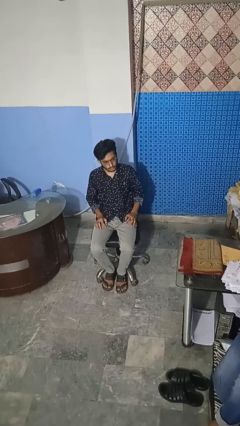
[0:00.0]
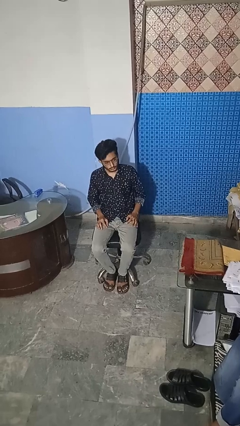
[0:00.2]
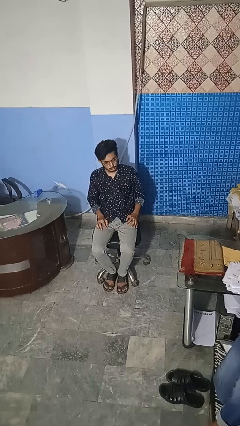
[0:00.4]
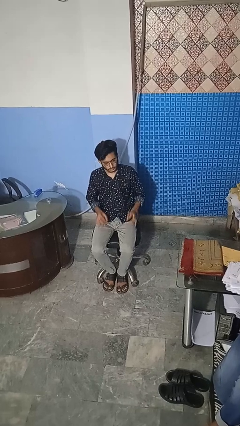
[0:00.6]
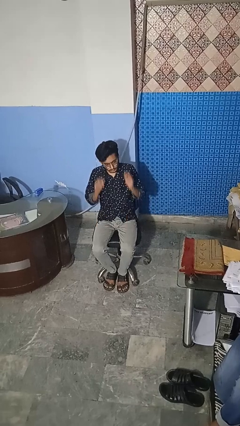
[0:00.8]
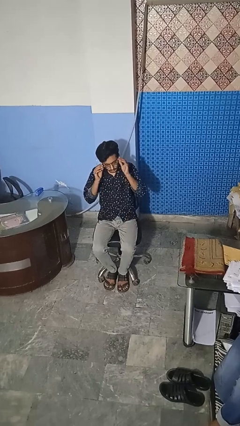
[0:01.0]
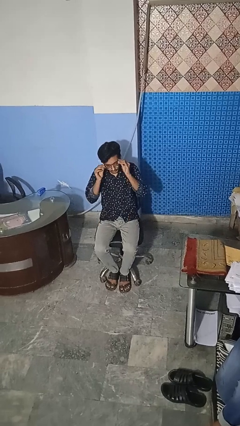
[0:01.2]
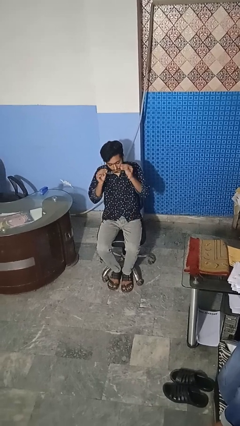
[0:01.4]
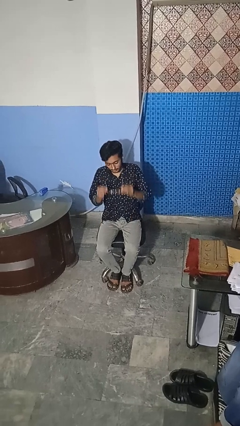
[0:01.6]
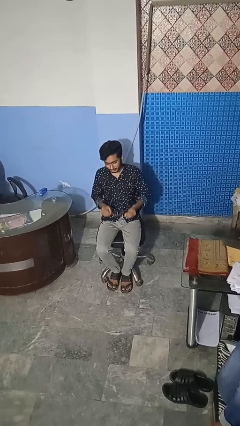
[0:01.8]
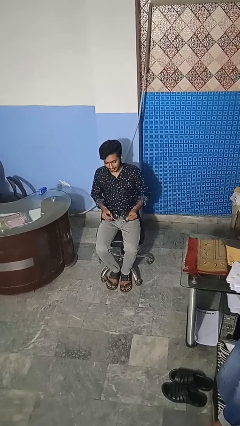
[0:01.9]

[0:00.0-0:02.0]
person takes off glasses

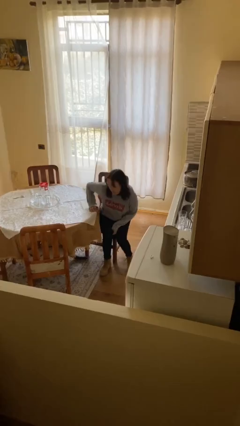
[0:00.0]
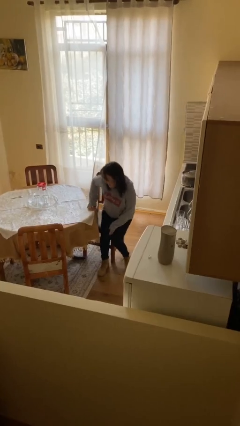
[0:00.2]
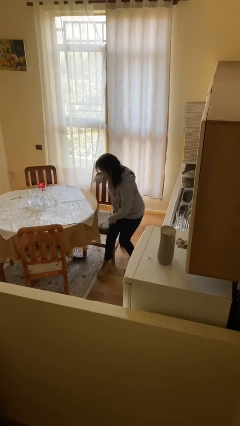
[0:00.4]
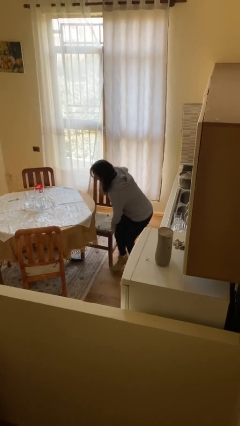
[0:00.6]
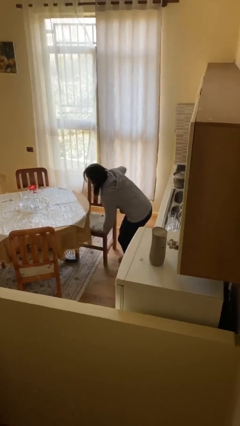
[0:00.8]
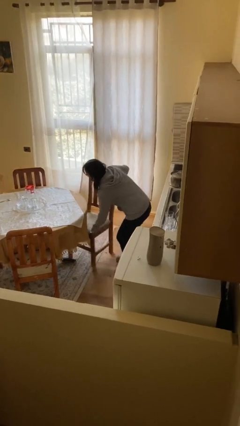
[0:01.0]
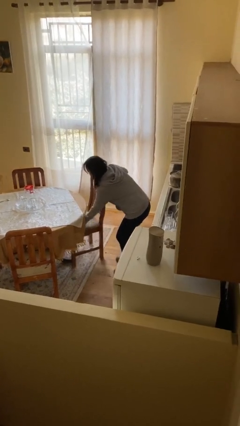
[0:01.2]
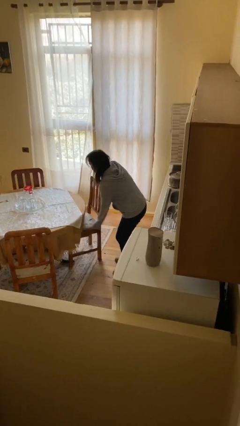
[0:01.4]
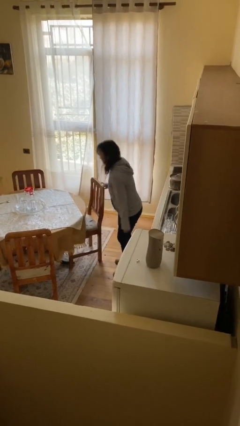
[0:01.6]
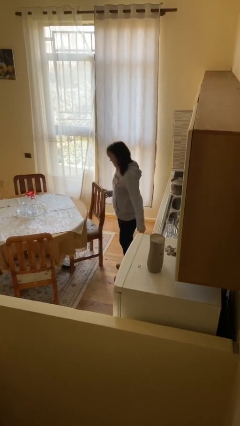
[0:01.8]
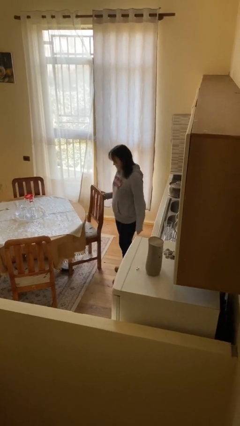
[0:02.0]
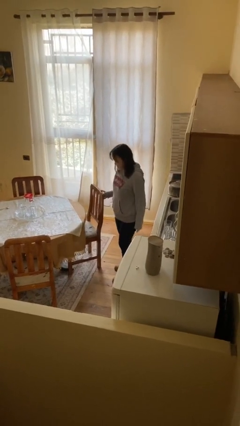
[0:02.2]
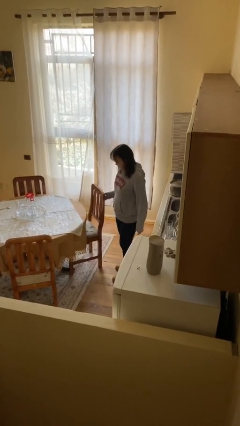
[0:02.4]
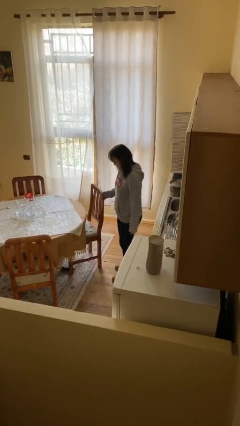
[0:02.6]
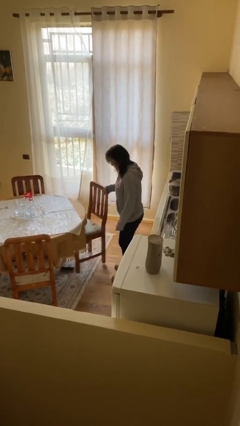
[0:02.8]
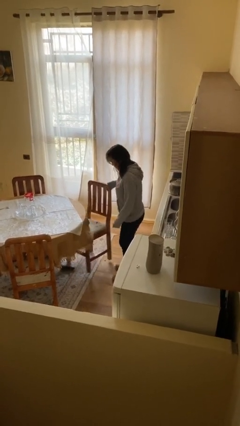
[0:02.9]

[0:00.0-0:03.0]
person stands up

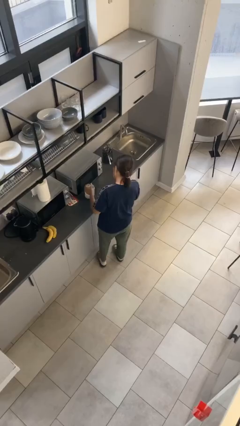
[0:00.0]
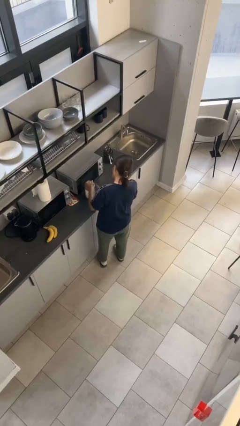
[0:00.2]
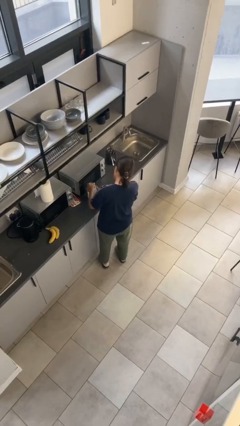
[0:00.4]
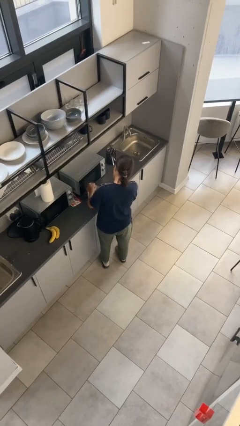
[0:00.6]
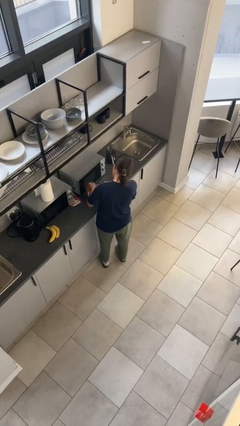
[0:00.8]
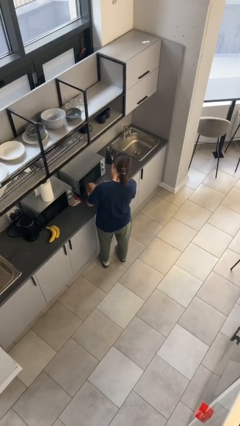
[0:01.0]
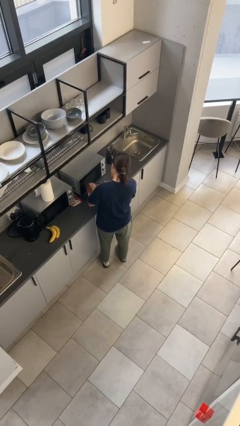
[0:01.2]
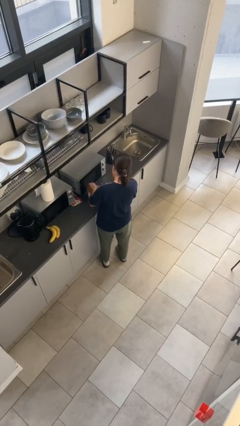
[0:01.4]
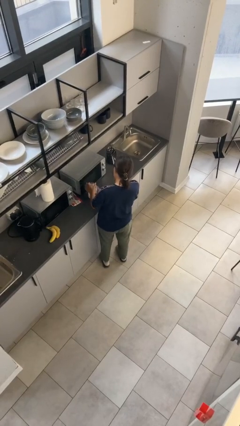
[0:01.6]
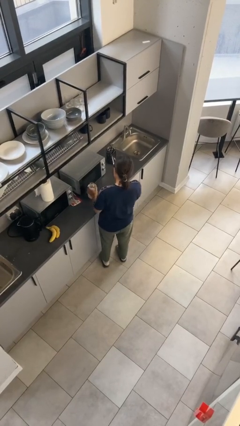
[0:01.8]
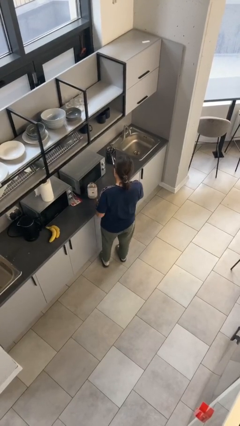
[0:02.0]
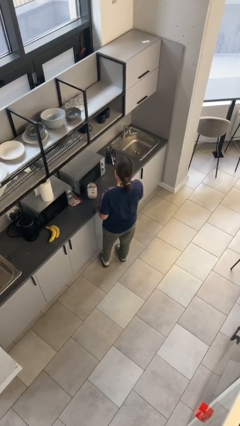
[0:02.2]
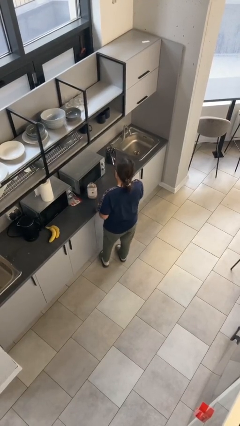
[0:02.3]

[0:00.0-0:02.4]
person closes jar

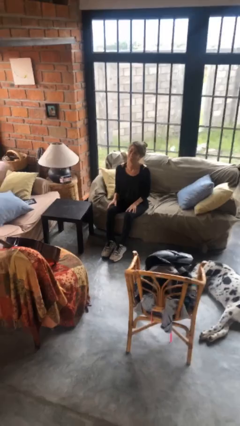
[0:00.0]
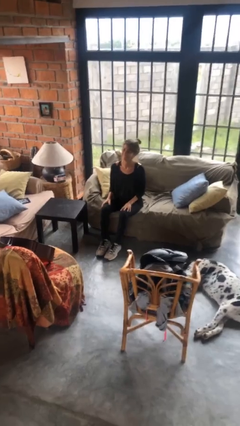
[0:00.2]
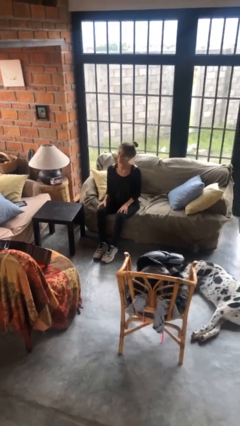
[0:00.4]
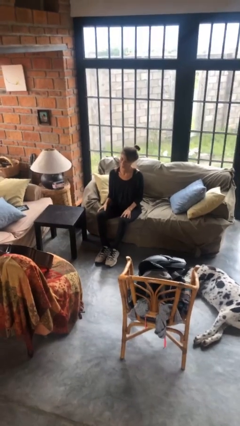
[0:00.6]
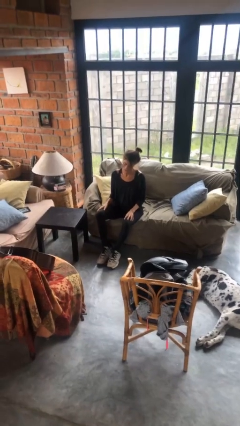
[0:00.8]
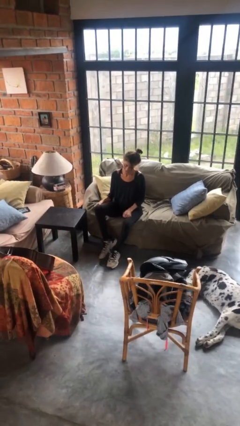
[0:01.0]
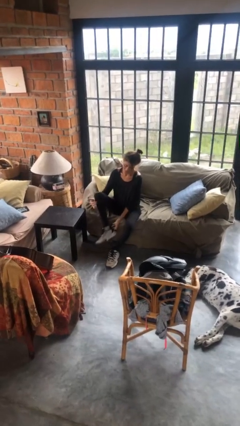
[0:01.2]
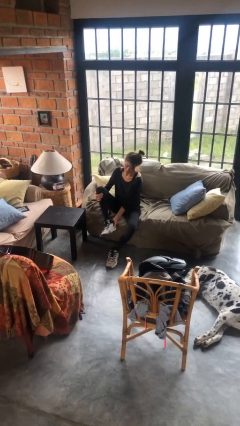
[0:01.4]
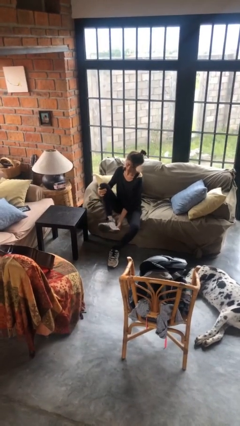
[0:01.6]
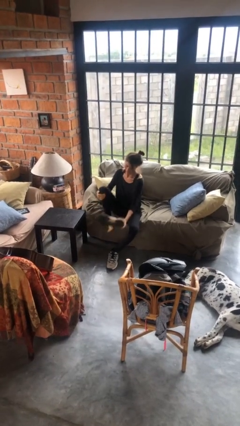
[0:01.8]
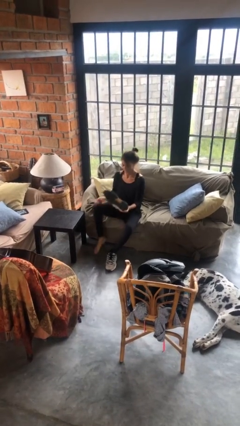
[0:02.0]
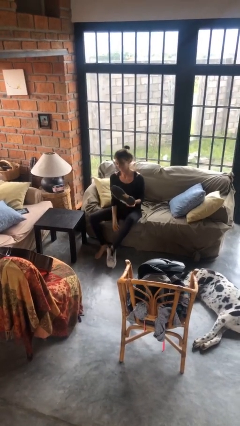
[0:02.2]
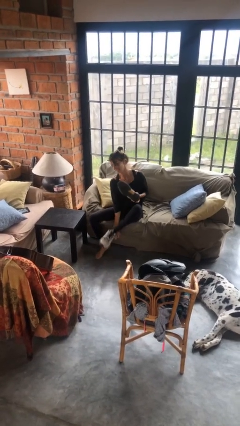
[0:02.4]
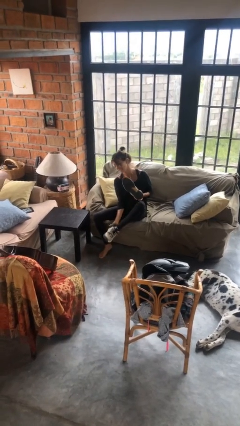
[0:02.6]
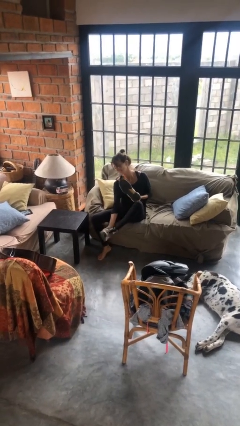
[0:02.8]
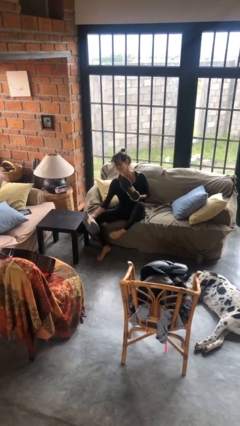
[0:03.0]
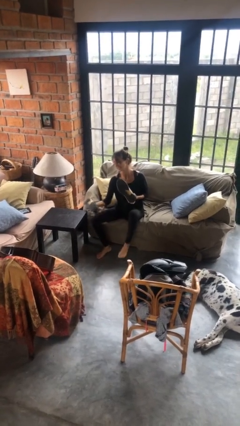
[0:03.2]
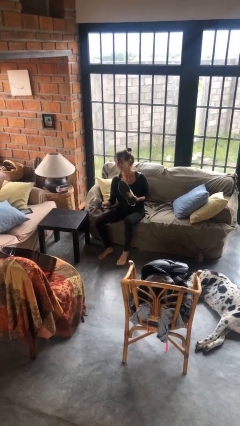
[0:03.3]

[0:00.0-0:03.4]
person takes off shoes

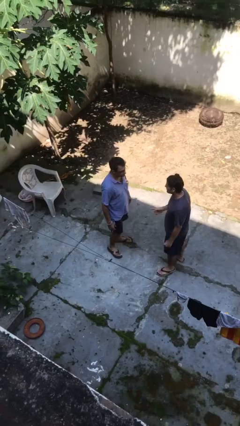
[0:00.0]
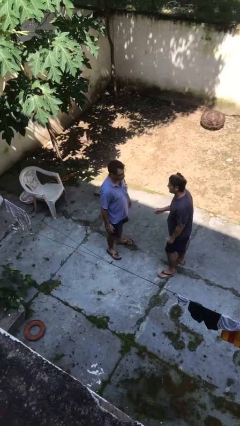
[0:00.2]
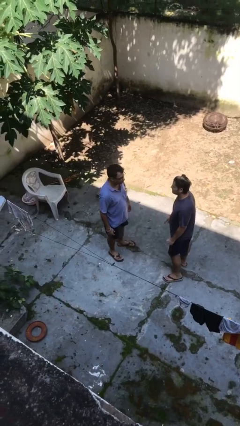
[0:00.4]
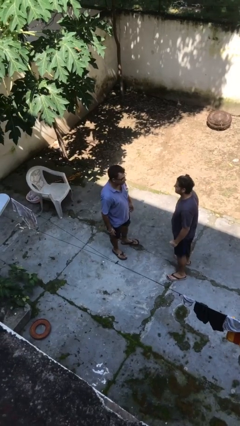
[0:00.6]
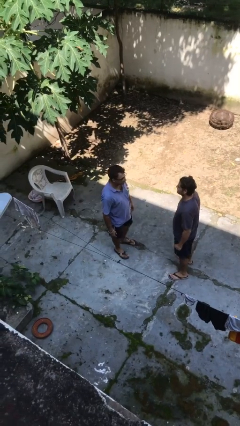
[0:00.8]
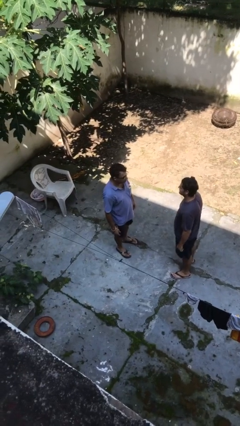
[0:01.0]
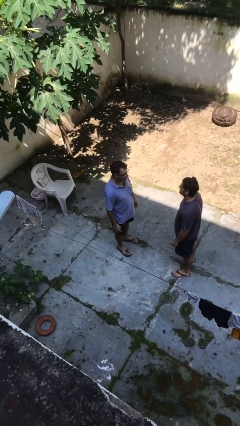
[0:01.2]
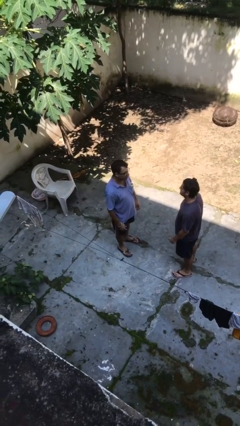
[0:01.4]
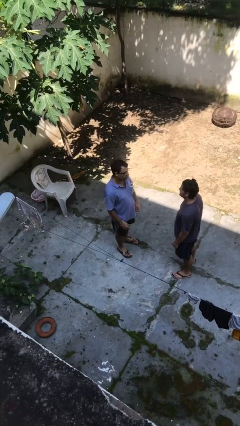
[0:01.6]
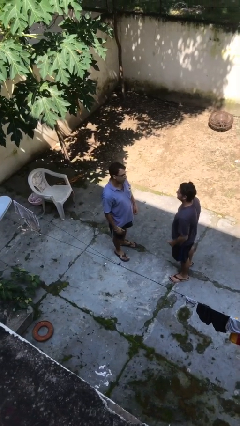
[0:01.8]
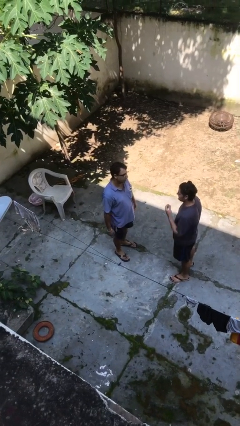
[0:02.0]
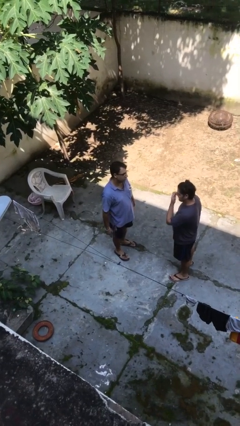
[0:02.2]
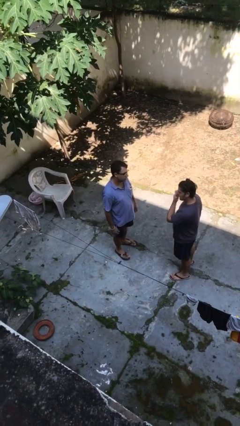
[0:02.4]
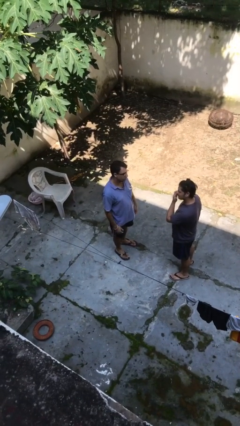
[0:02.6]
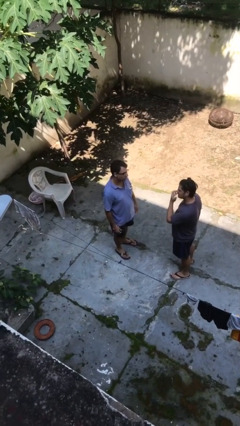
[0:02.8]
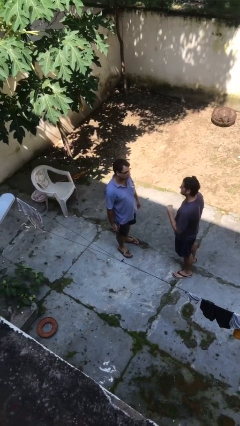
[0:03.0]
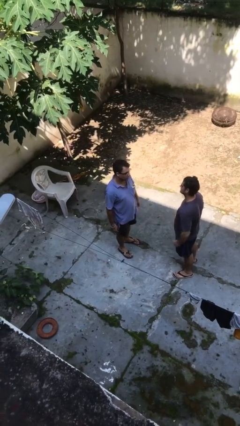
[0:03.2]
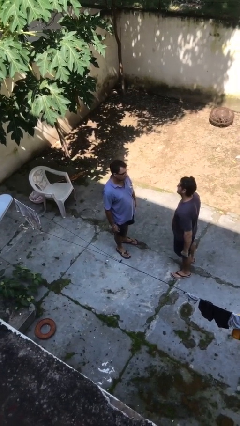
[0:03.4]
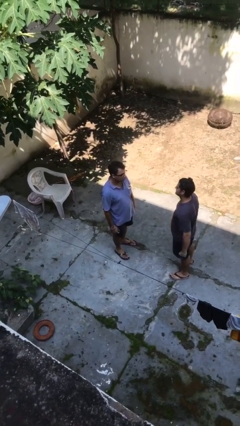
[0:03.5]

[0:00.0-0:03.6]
person talks to person

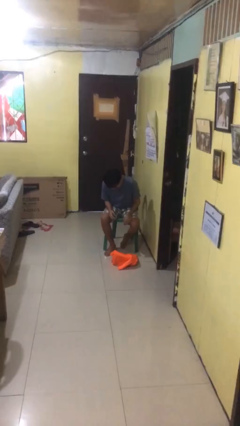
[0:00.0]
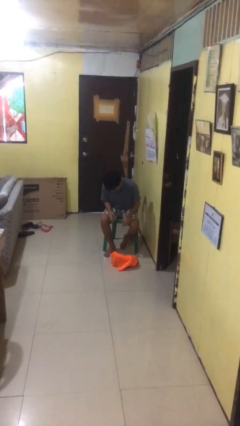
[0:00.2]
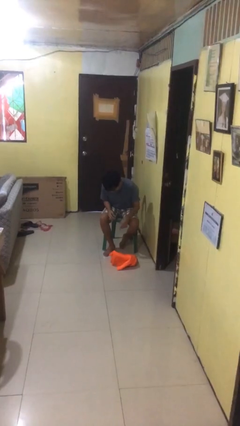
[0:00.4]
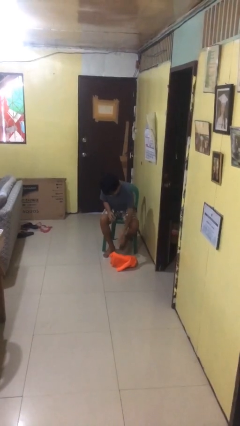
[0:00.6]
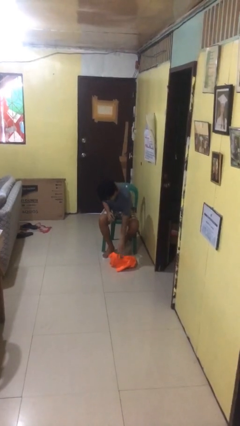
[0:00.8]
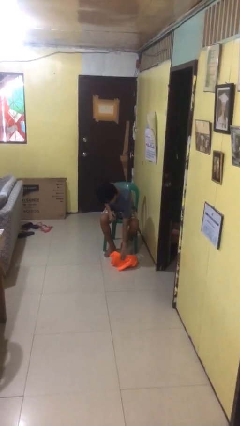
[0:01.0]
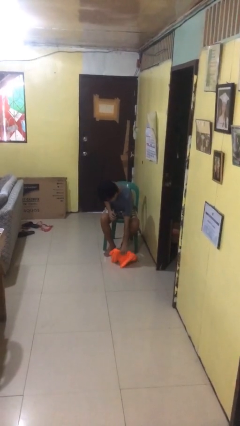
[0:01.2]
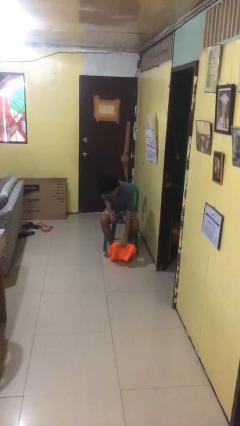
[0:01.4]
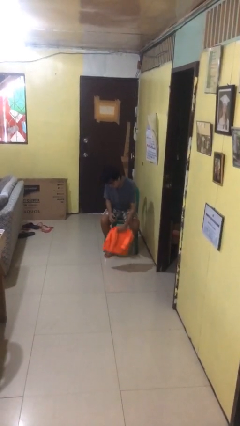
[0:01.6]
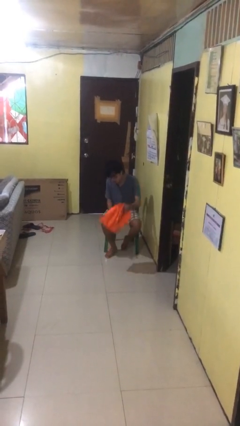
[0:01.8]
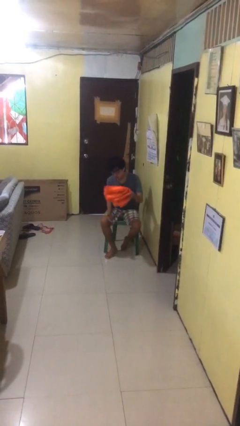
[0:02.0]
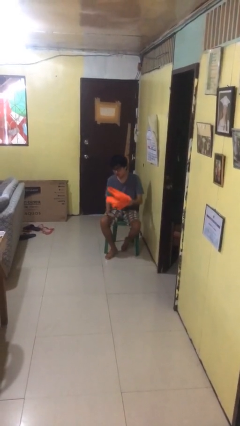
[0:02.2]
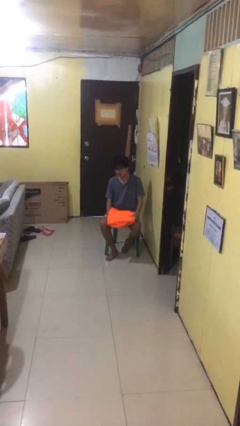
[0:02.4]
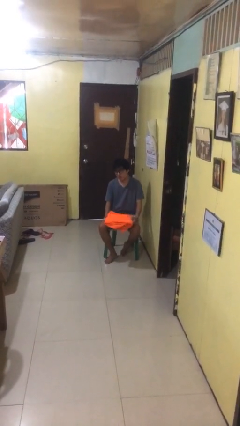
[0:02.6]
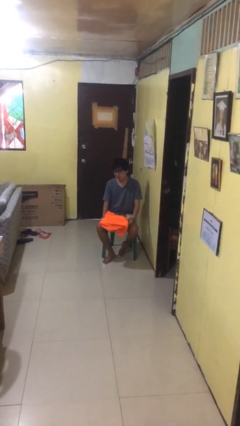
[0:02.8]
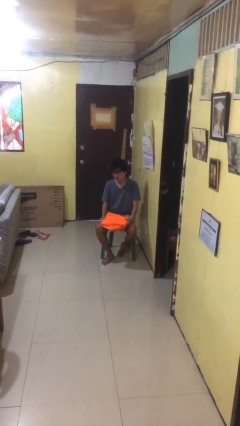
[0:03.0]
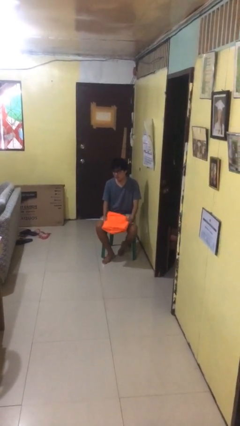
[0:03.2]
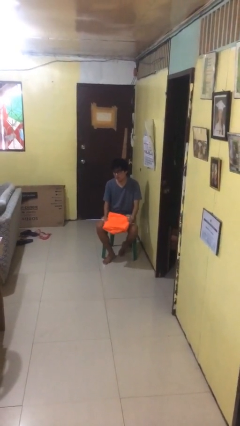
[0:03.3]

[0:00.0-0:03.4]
person picks up object from floor
